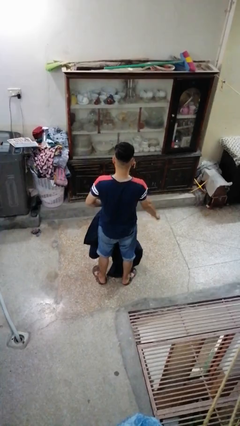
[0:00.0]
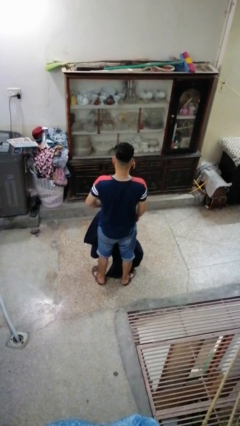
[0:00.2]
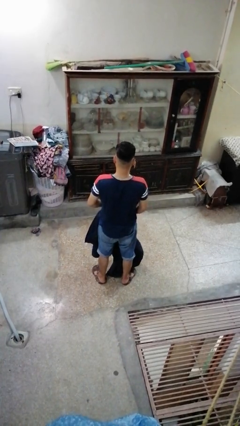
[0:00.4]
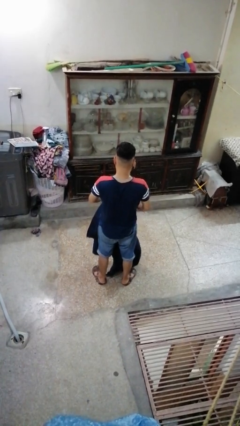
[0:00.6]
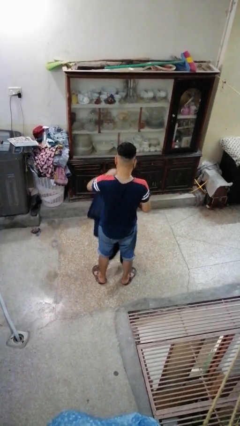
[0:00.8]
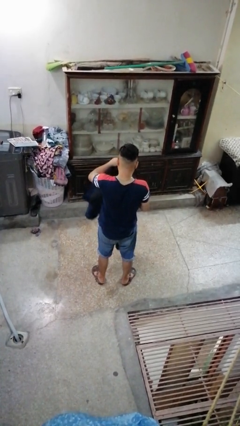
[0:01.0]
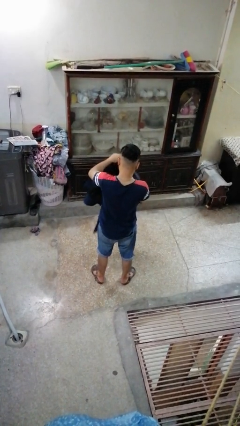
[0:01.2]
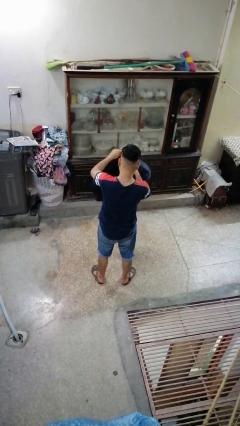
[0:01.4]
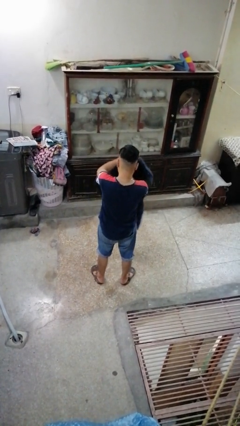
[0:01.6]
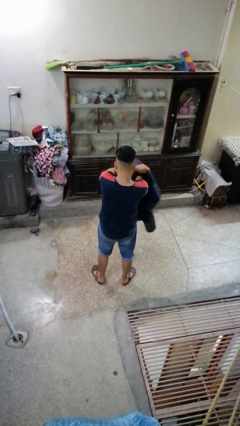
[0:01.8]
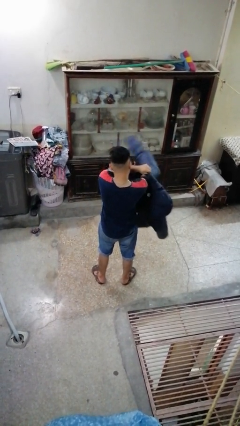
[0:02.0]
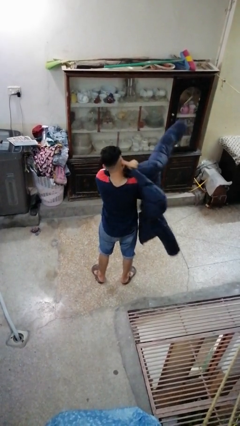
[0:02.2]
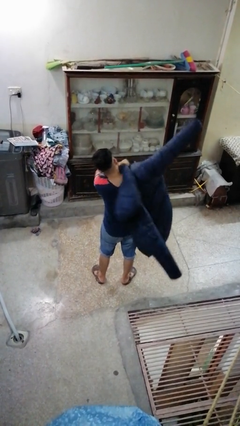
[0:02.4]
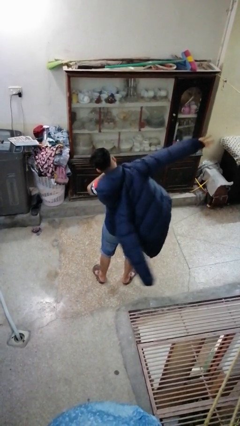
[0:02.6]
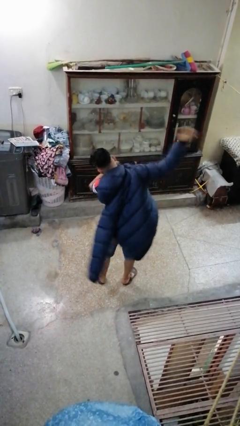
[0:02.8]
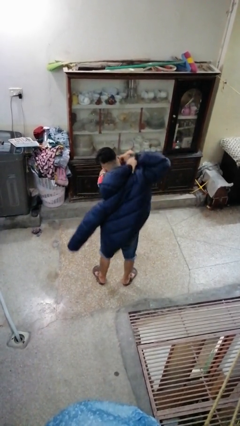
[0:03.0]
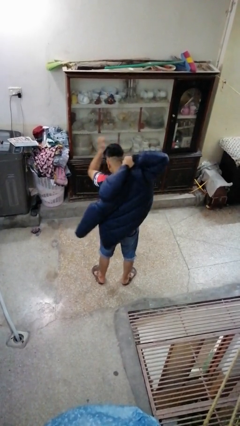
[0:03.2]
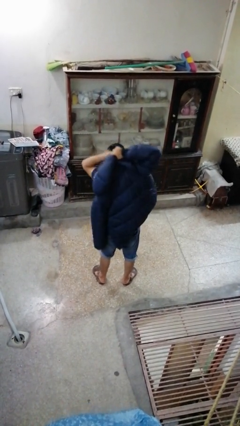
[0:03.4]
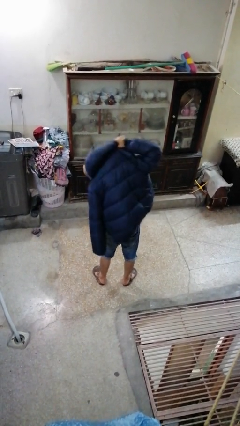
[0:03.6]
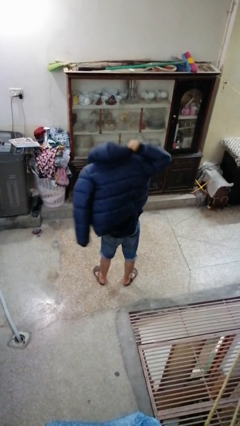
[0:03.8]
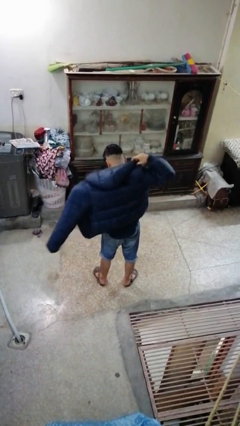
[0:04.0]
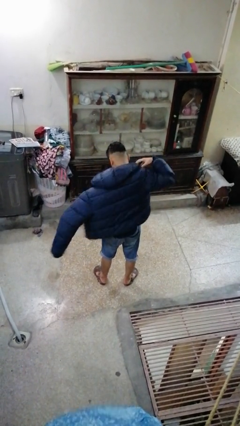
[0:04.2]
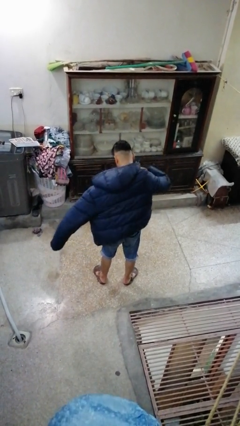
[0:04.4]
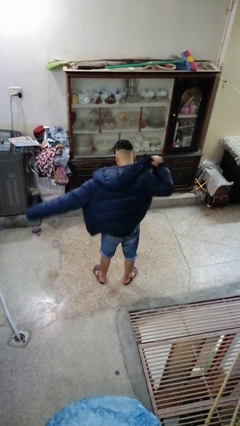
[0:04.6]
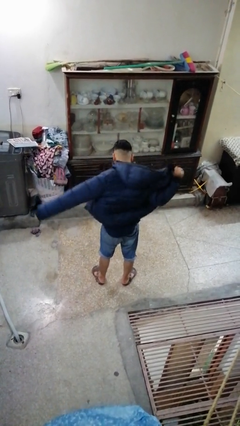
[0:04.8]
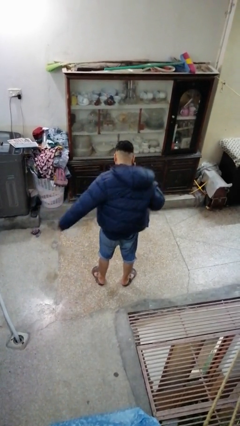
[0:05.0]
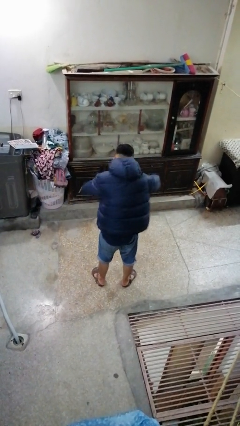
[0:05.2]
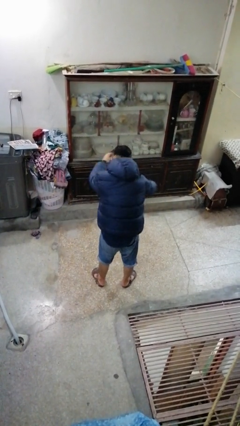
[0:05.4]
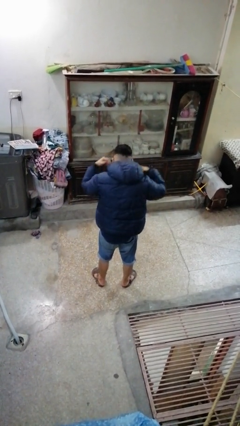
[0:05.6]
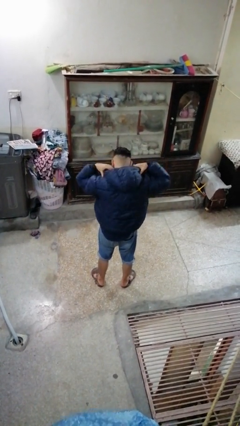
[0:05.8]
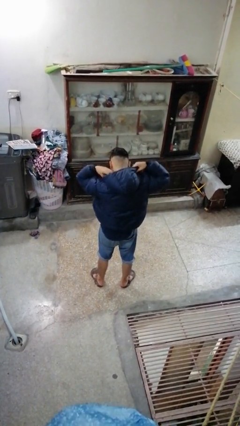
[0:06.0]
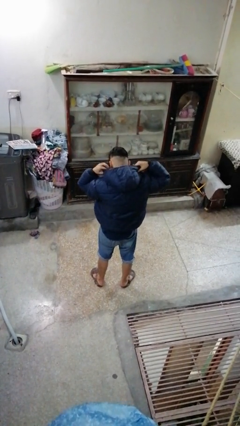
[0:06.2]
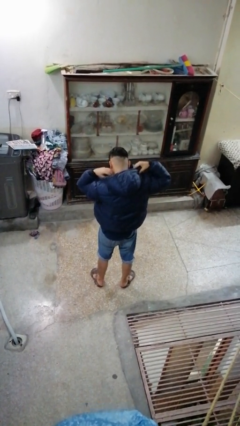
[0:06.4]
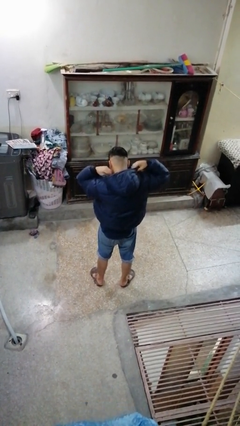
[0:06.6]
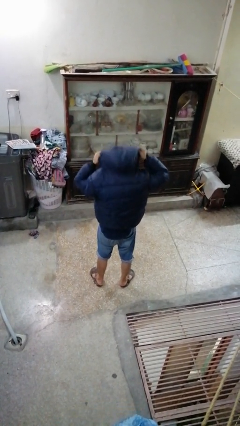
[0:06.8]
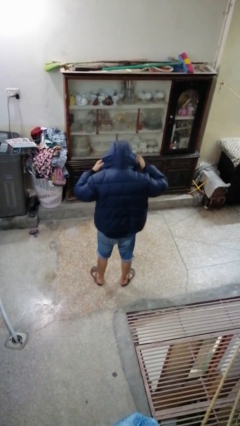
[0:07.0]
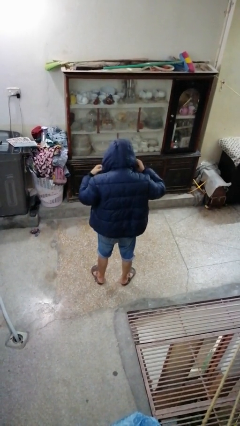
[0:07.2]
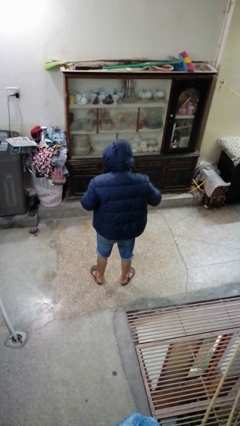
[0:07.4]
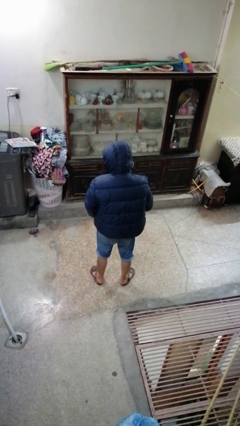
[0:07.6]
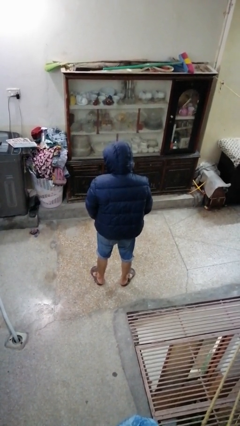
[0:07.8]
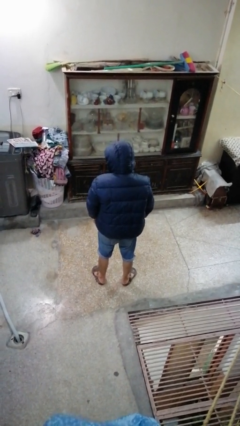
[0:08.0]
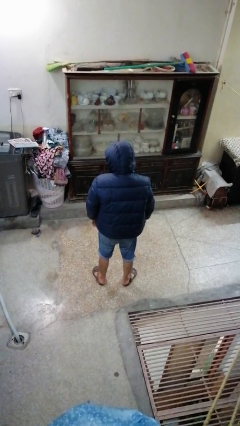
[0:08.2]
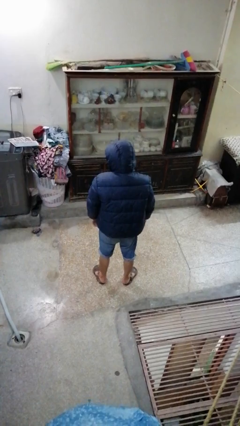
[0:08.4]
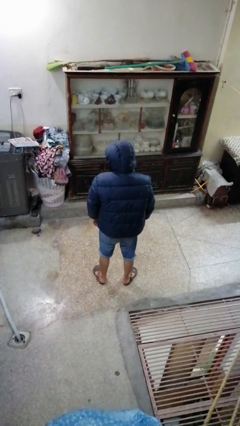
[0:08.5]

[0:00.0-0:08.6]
person puts on hoodie

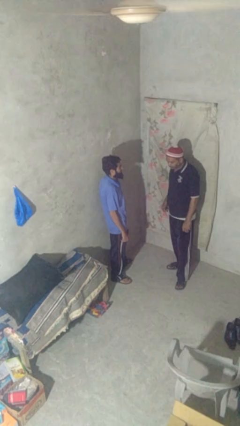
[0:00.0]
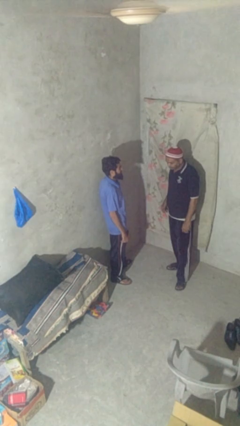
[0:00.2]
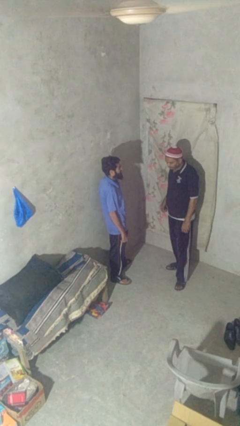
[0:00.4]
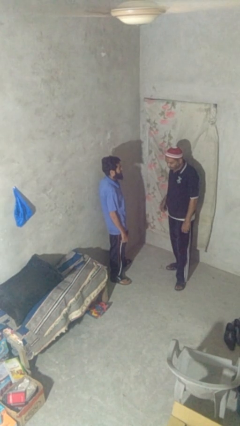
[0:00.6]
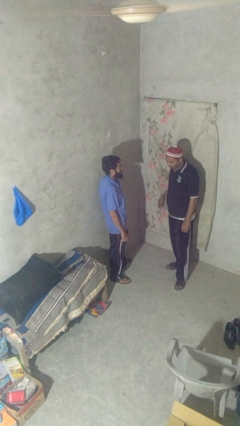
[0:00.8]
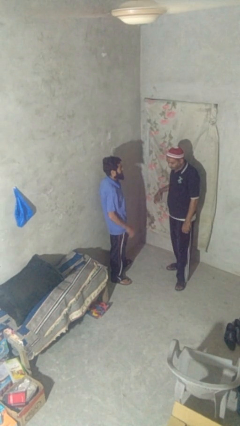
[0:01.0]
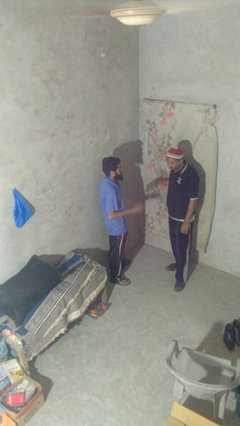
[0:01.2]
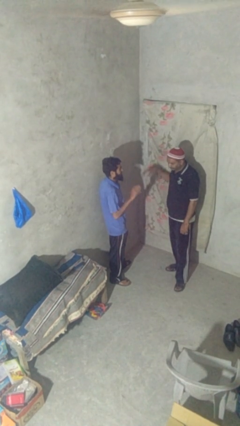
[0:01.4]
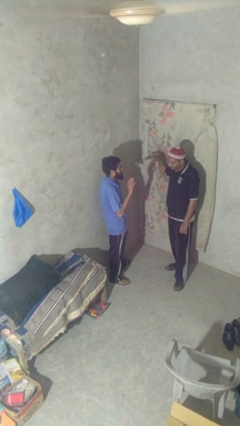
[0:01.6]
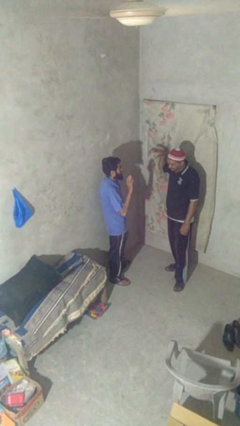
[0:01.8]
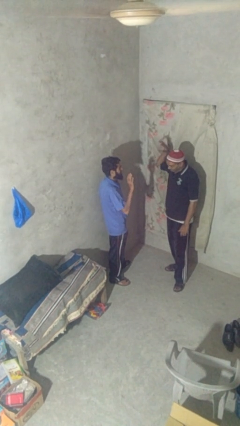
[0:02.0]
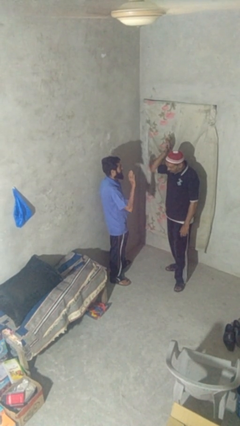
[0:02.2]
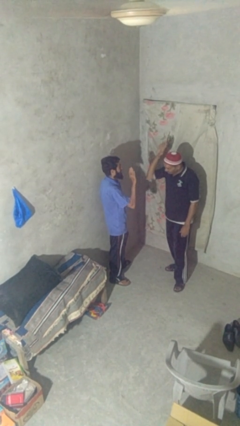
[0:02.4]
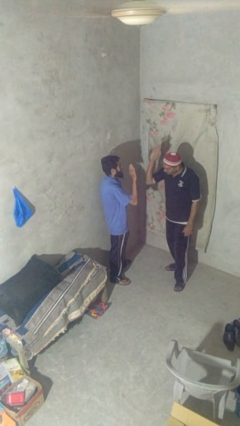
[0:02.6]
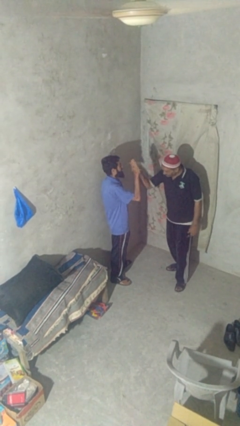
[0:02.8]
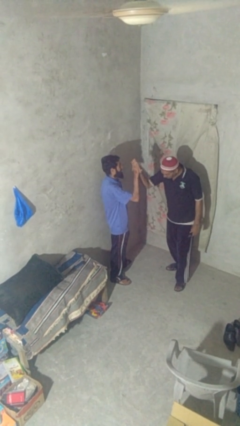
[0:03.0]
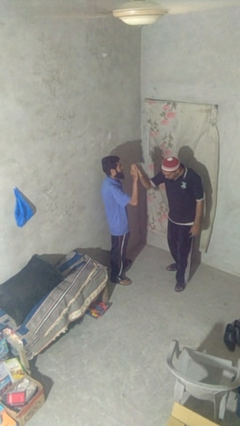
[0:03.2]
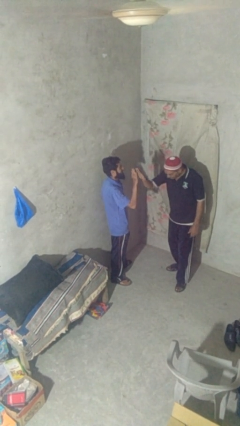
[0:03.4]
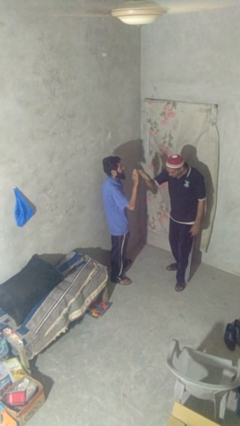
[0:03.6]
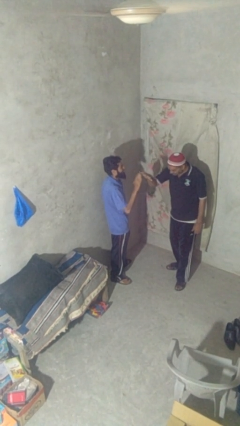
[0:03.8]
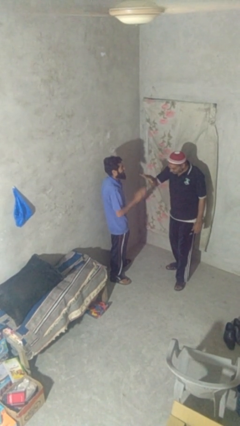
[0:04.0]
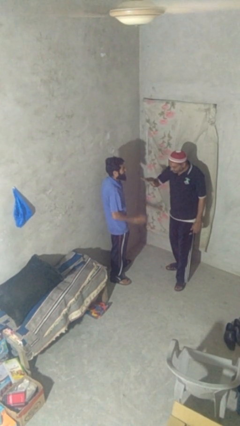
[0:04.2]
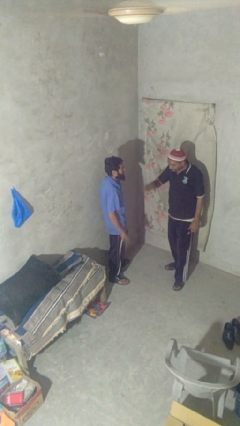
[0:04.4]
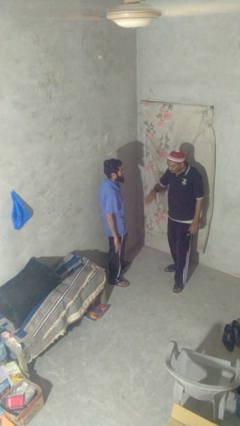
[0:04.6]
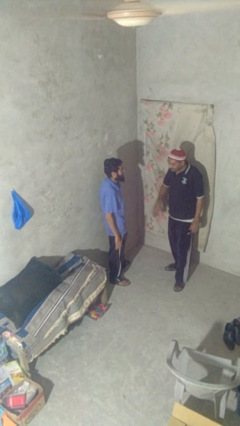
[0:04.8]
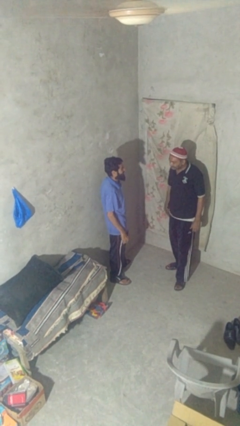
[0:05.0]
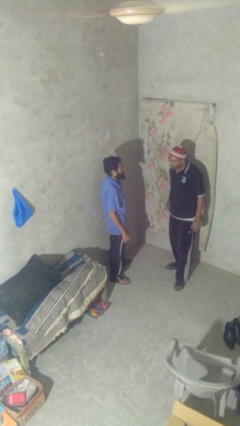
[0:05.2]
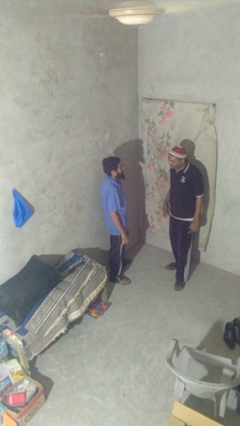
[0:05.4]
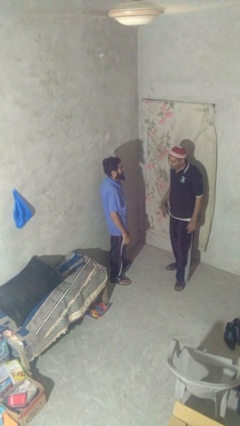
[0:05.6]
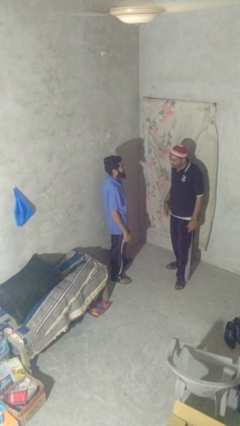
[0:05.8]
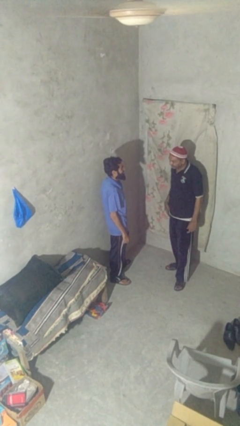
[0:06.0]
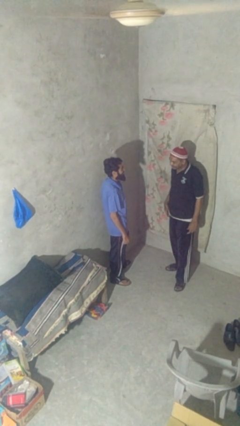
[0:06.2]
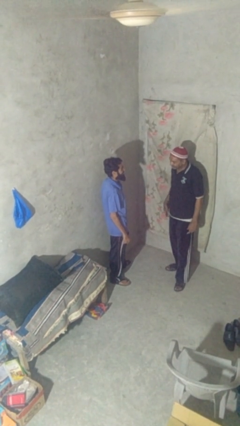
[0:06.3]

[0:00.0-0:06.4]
person highfives hand

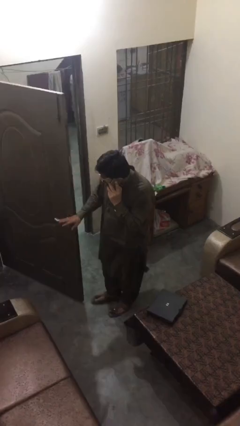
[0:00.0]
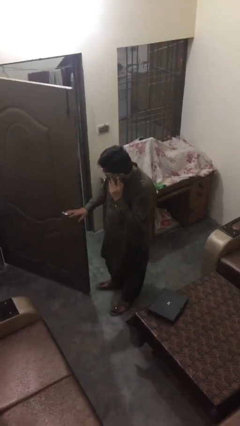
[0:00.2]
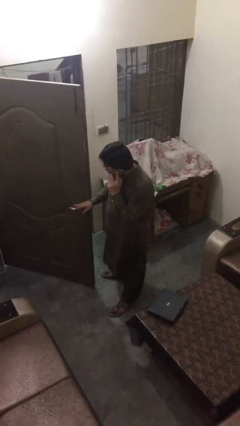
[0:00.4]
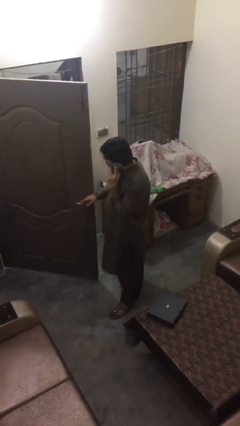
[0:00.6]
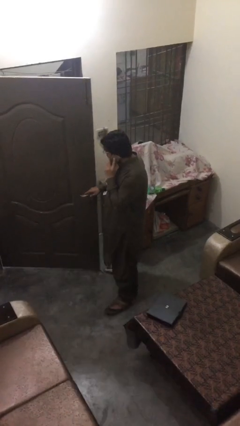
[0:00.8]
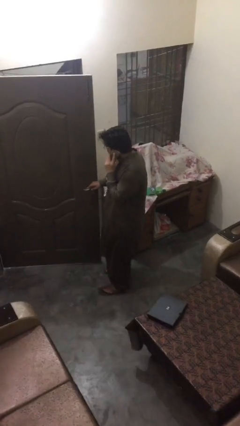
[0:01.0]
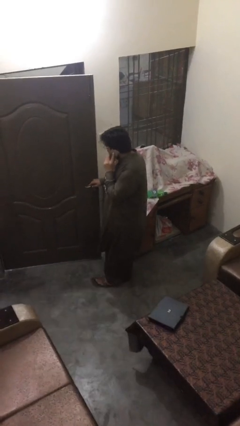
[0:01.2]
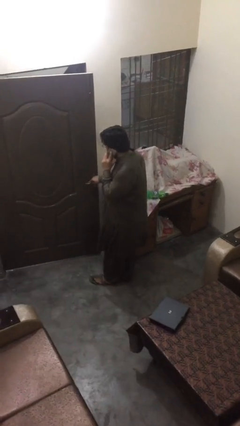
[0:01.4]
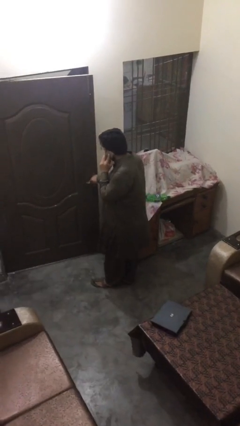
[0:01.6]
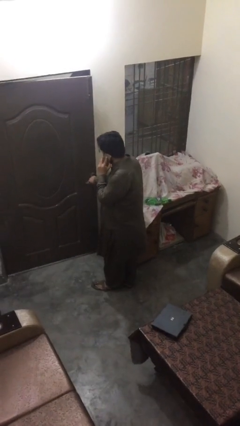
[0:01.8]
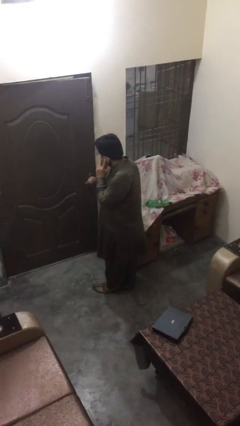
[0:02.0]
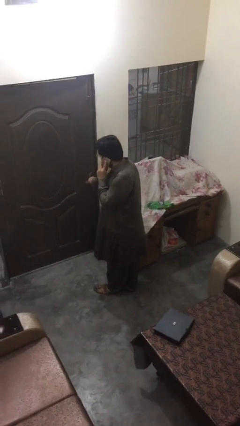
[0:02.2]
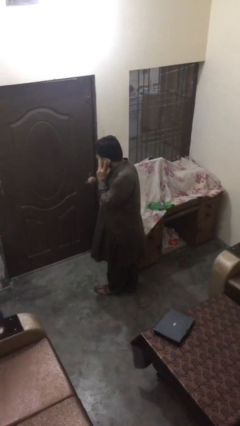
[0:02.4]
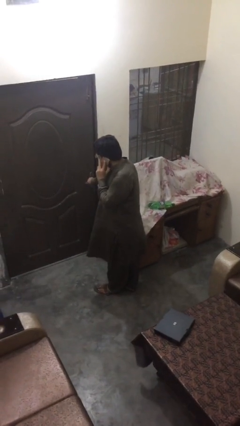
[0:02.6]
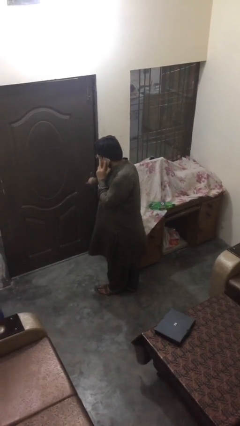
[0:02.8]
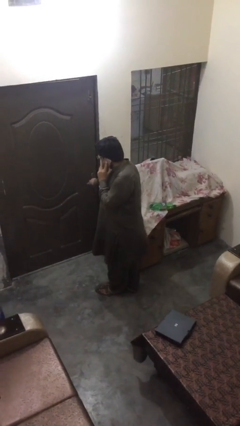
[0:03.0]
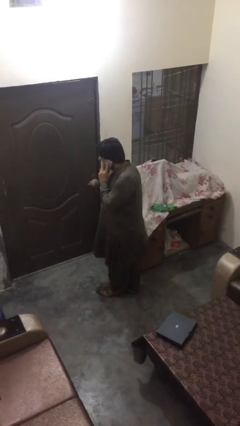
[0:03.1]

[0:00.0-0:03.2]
person closes facility door
